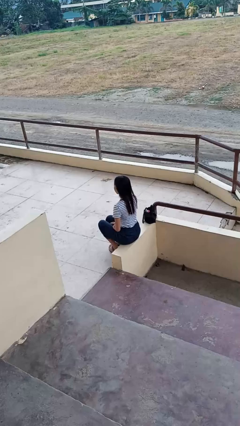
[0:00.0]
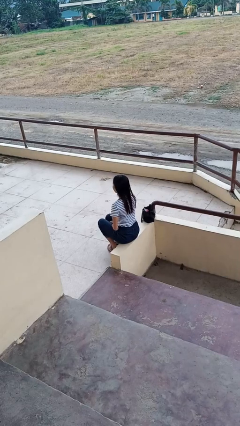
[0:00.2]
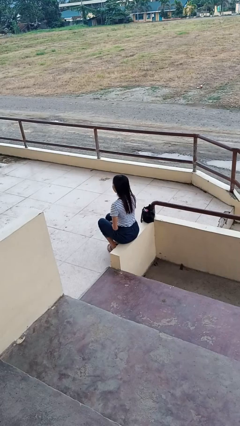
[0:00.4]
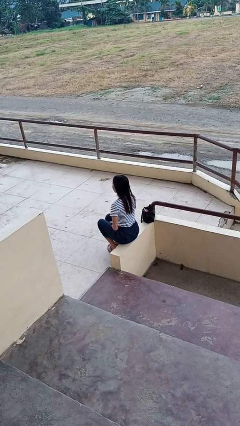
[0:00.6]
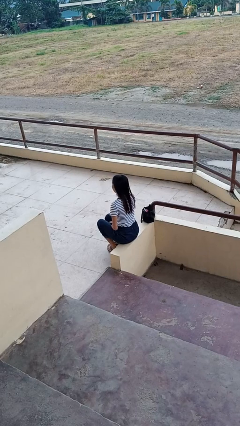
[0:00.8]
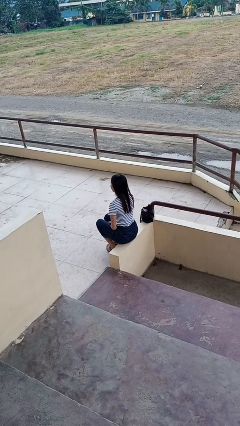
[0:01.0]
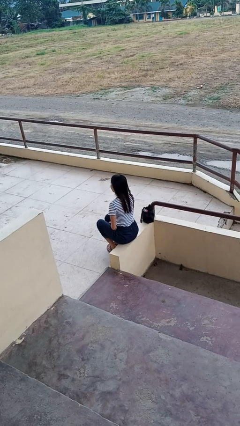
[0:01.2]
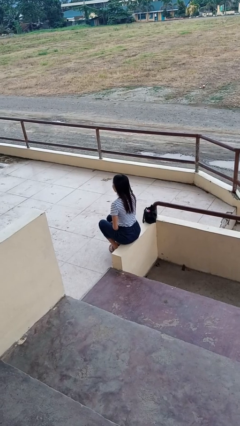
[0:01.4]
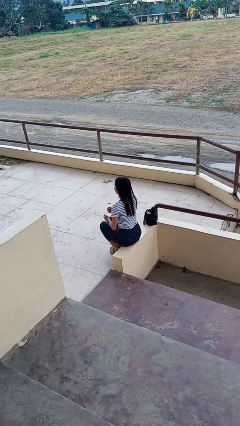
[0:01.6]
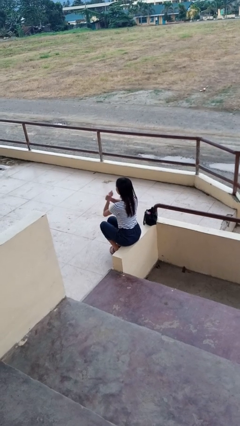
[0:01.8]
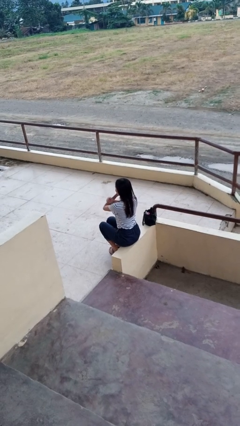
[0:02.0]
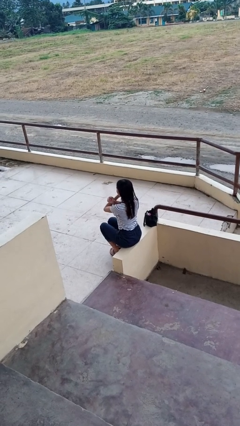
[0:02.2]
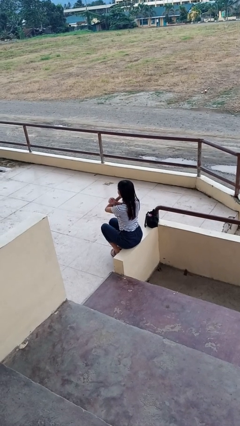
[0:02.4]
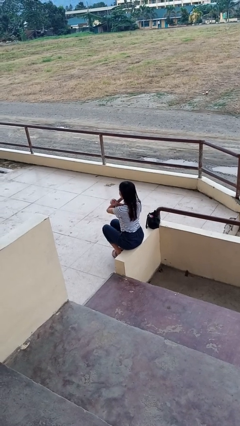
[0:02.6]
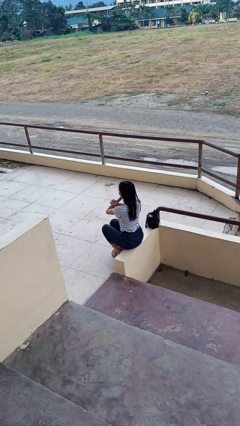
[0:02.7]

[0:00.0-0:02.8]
person gestures arms x

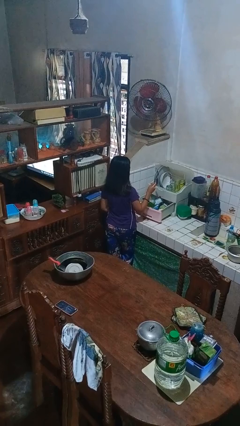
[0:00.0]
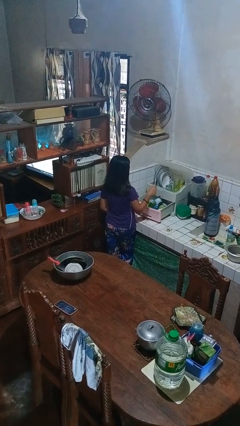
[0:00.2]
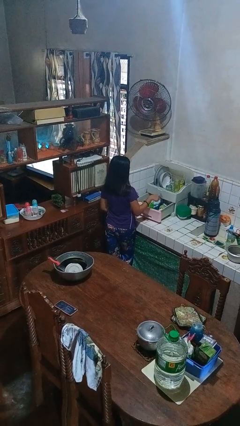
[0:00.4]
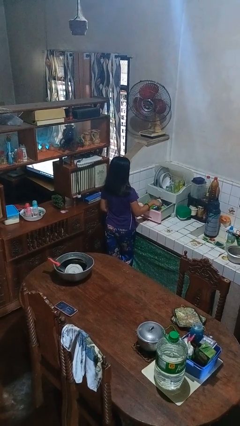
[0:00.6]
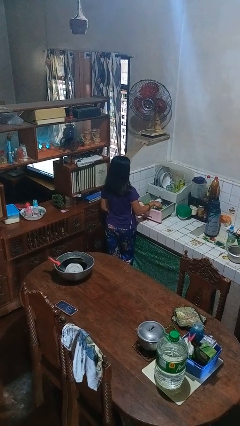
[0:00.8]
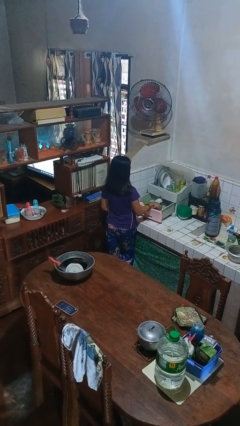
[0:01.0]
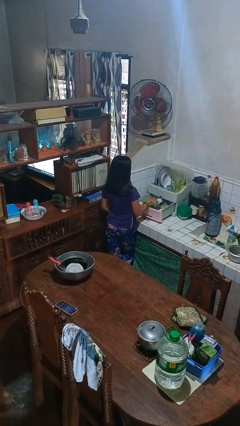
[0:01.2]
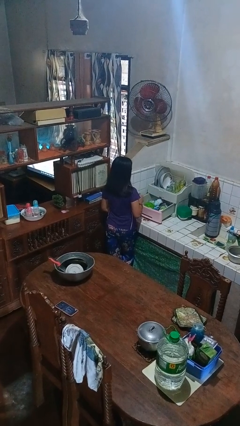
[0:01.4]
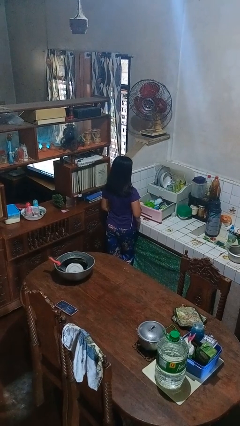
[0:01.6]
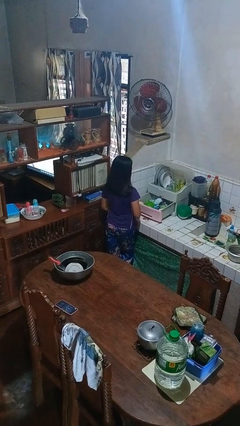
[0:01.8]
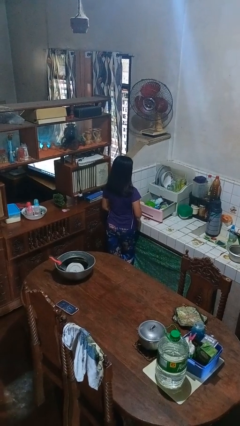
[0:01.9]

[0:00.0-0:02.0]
person puts object into kitchen drawer

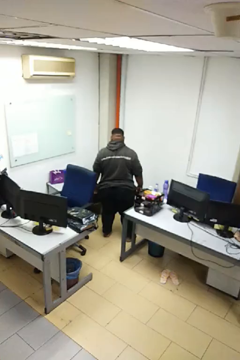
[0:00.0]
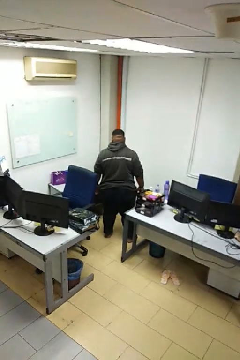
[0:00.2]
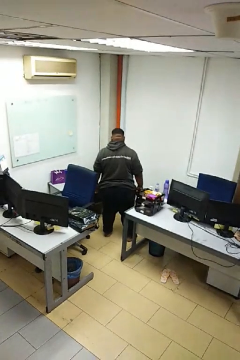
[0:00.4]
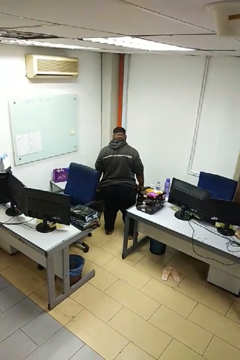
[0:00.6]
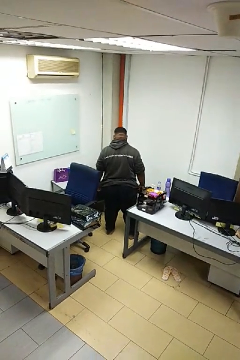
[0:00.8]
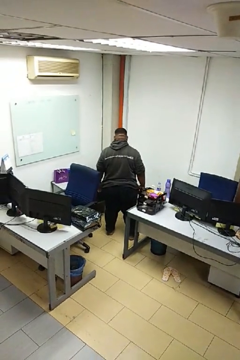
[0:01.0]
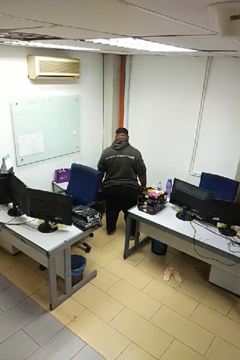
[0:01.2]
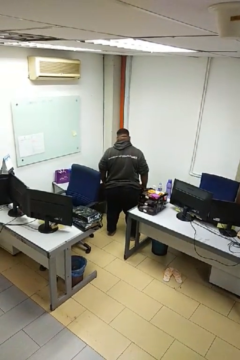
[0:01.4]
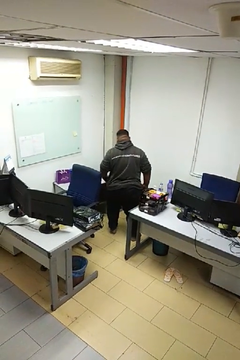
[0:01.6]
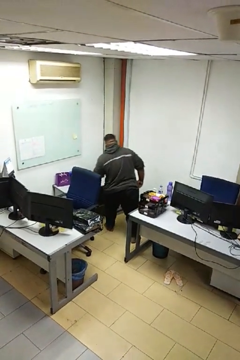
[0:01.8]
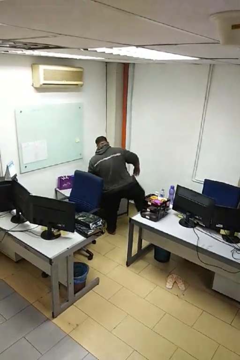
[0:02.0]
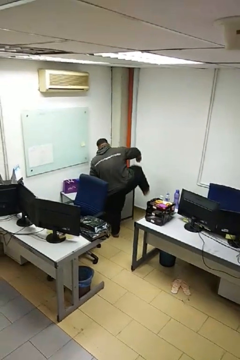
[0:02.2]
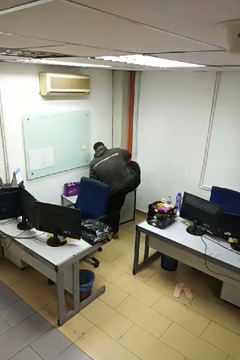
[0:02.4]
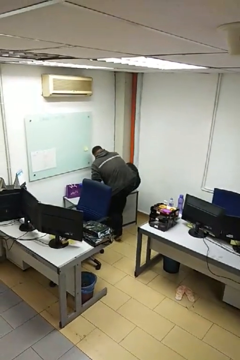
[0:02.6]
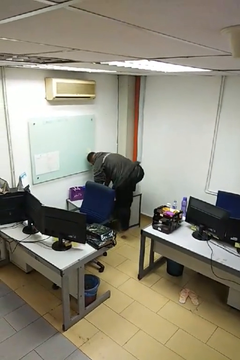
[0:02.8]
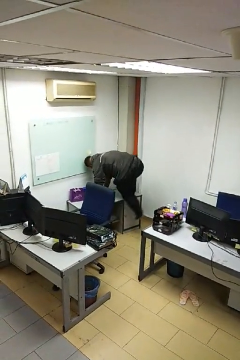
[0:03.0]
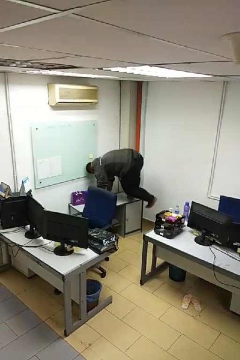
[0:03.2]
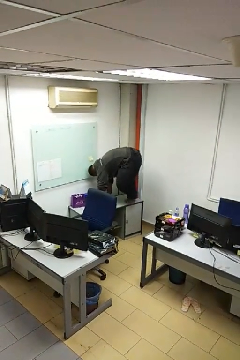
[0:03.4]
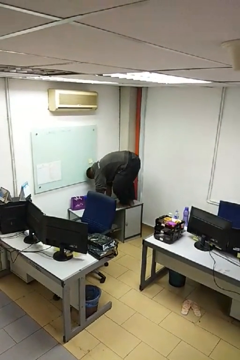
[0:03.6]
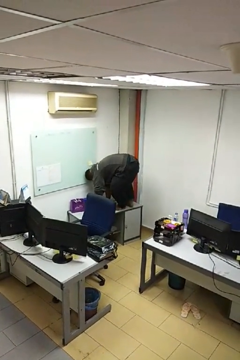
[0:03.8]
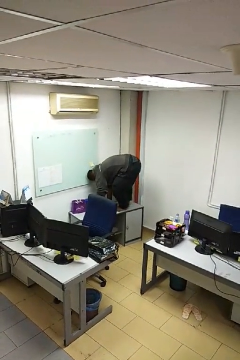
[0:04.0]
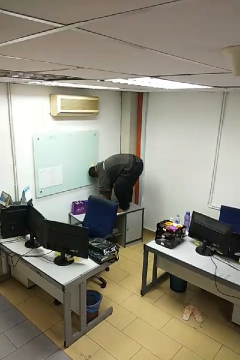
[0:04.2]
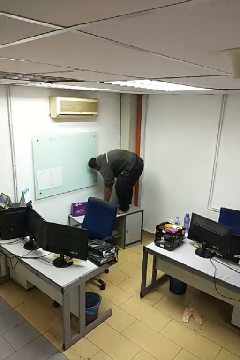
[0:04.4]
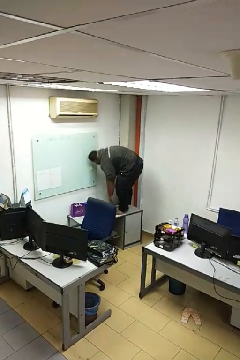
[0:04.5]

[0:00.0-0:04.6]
person climbs on table

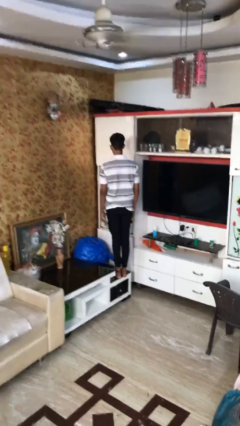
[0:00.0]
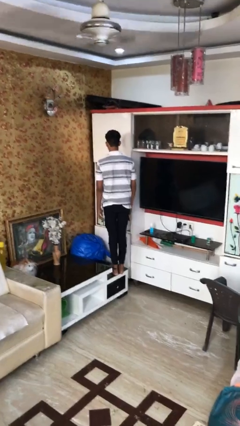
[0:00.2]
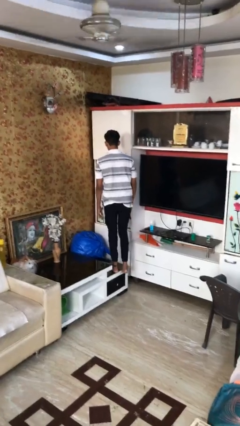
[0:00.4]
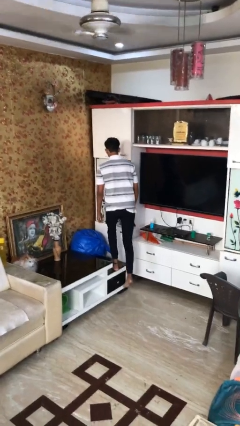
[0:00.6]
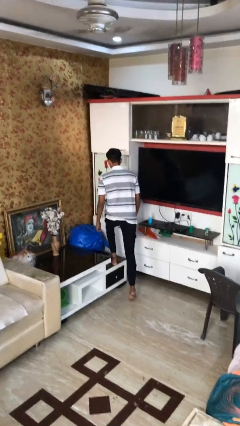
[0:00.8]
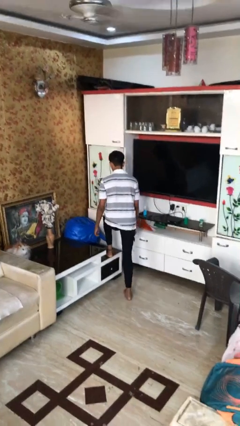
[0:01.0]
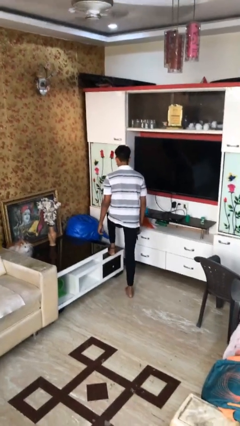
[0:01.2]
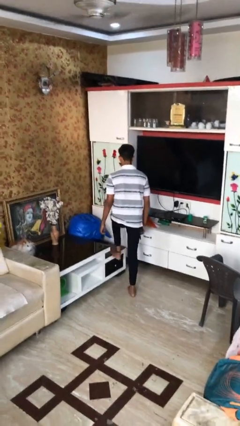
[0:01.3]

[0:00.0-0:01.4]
person climbs off table

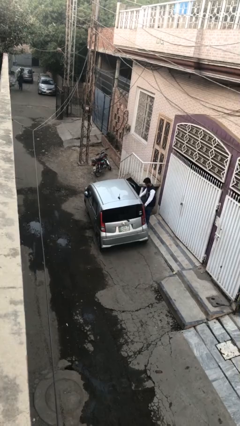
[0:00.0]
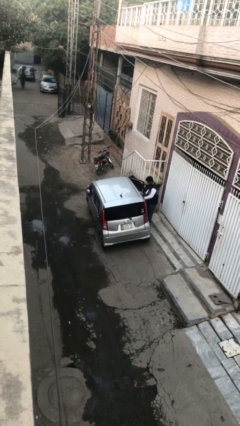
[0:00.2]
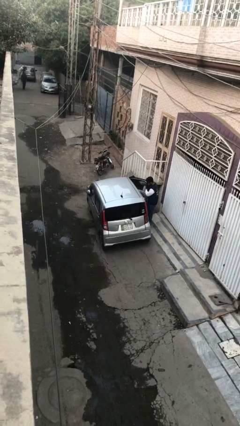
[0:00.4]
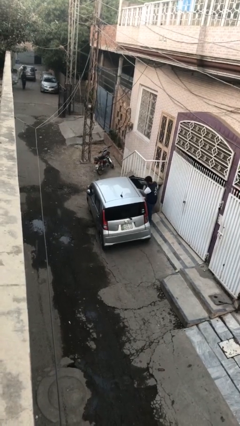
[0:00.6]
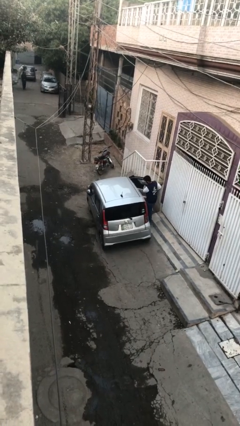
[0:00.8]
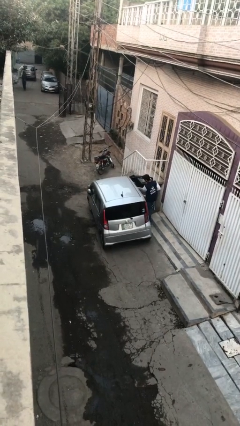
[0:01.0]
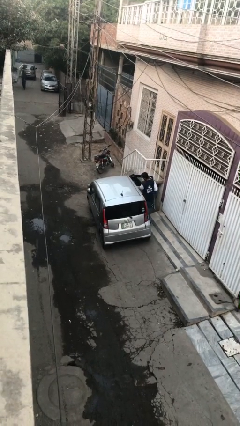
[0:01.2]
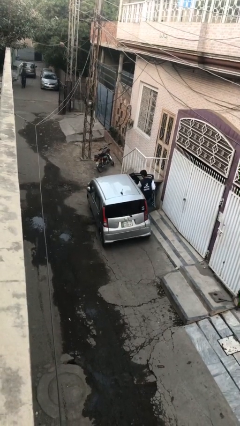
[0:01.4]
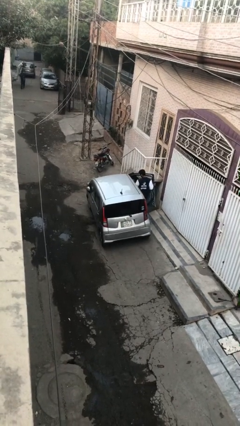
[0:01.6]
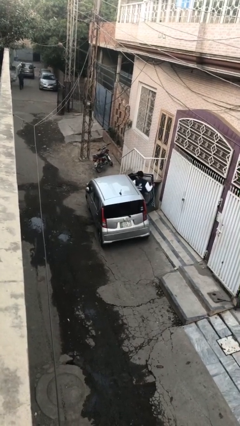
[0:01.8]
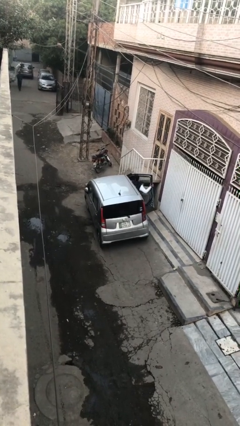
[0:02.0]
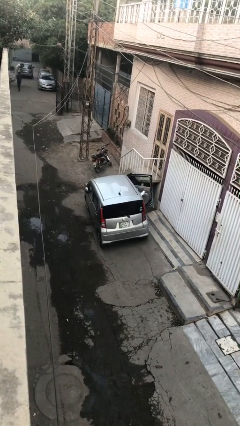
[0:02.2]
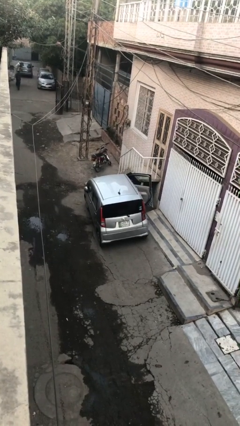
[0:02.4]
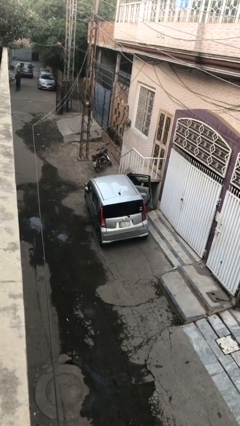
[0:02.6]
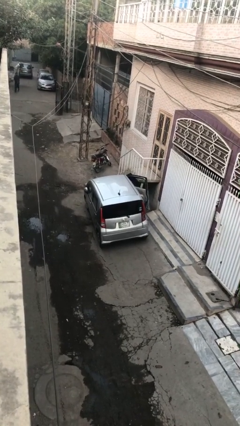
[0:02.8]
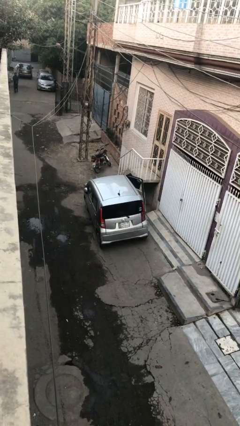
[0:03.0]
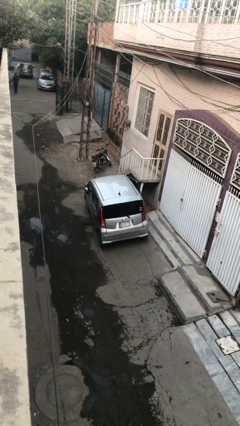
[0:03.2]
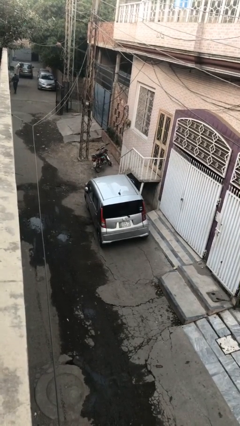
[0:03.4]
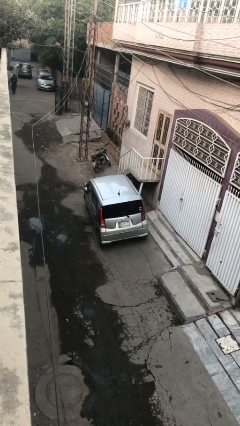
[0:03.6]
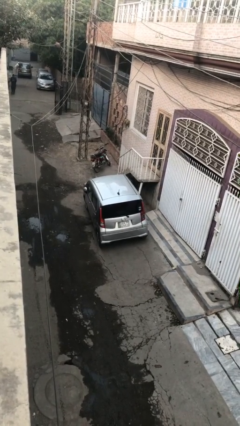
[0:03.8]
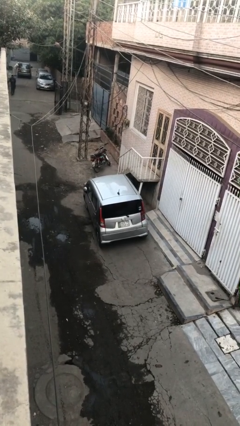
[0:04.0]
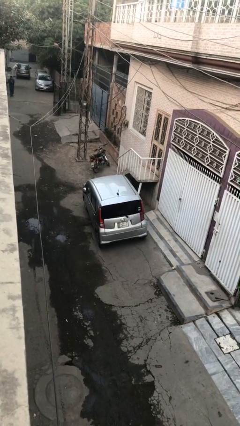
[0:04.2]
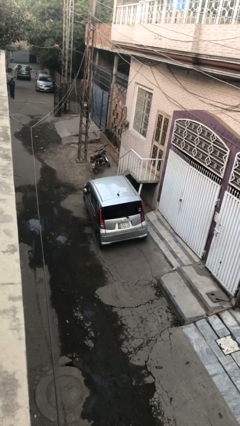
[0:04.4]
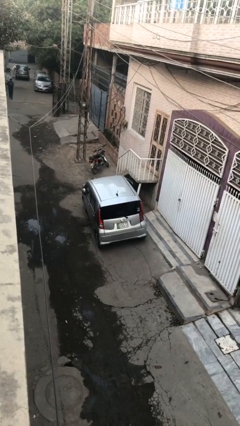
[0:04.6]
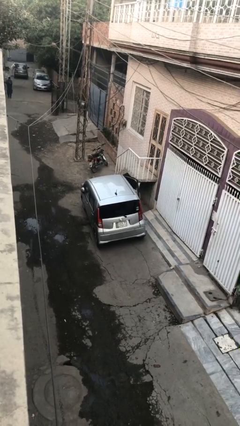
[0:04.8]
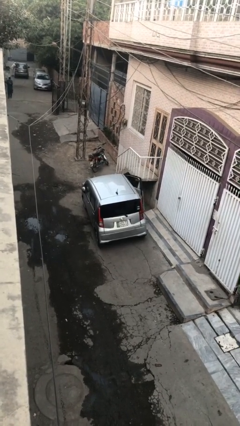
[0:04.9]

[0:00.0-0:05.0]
car picks up person

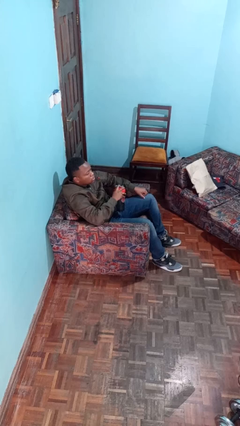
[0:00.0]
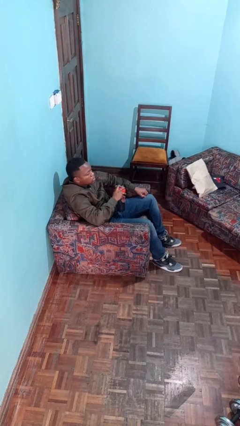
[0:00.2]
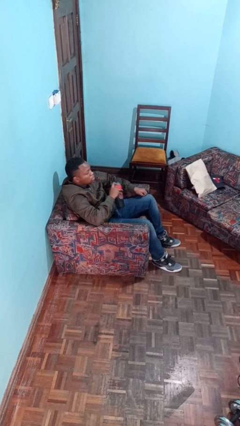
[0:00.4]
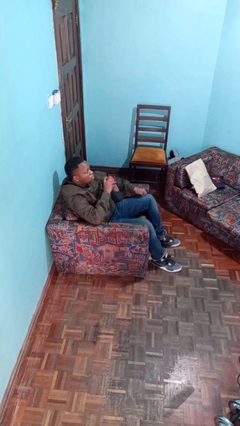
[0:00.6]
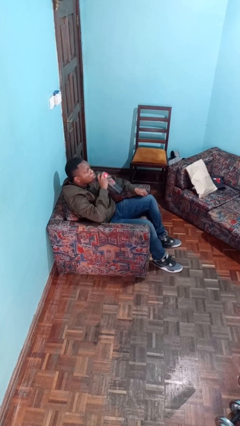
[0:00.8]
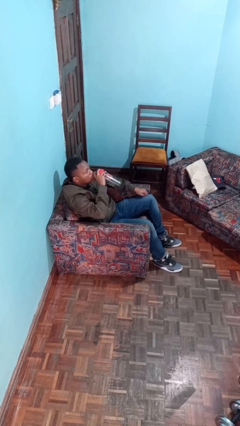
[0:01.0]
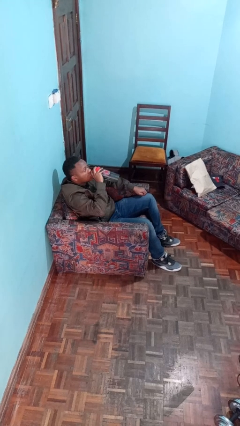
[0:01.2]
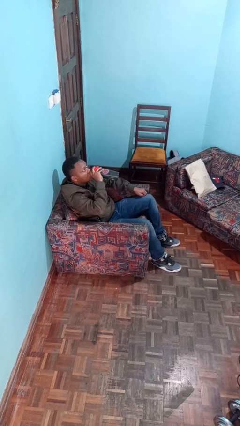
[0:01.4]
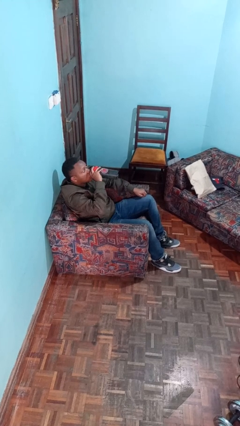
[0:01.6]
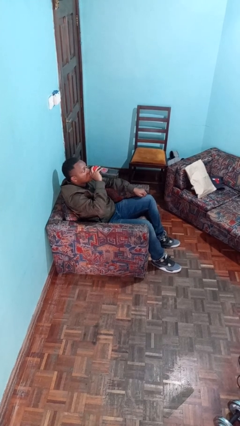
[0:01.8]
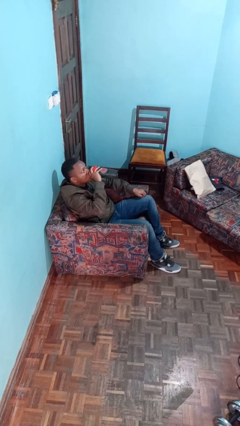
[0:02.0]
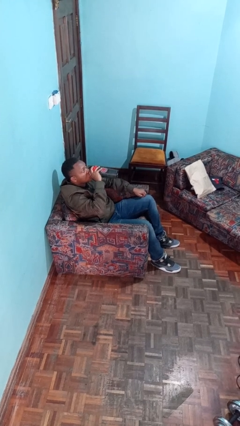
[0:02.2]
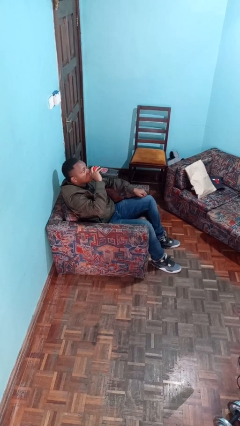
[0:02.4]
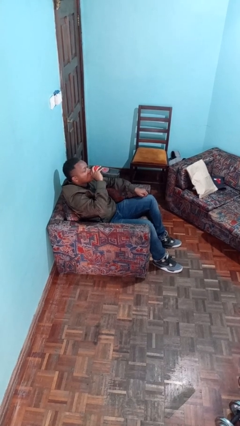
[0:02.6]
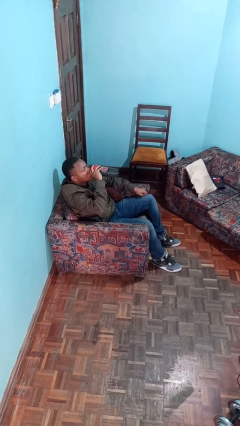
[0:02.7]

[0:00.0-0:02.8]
person drinks from bottle
